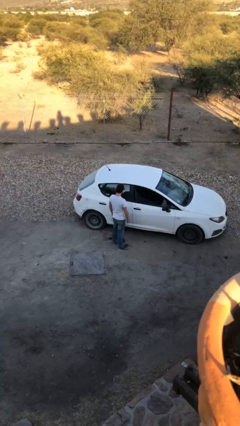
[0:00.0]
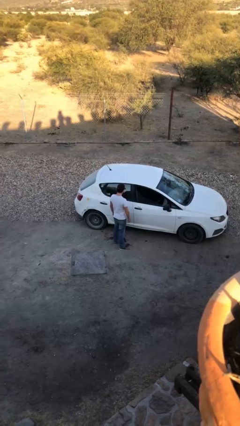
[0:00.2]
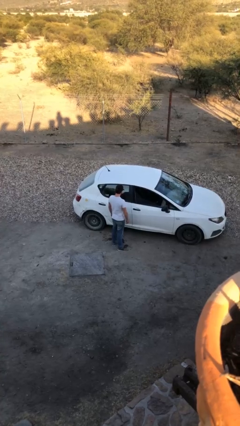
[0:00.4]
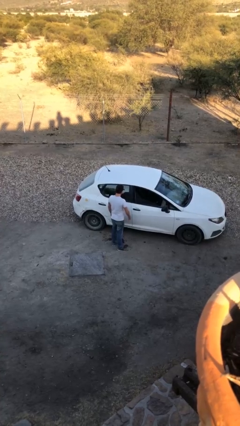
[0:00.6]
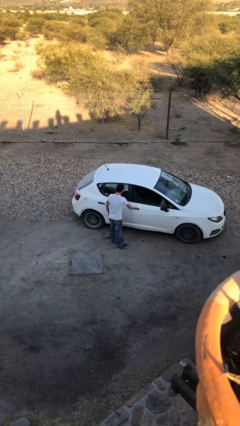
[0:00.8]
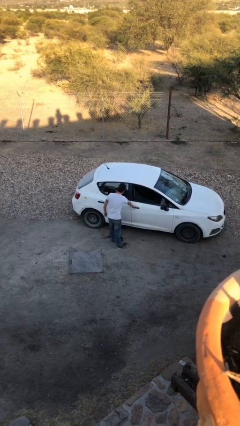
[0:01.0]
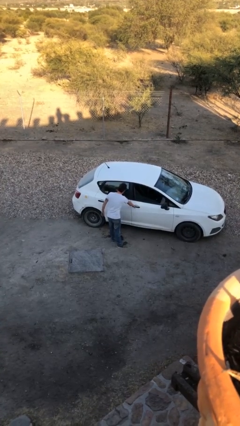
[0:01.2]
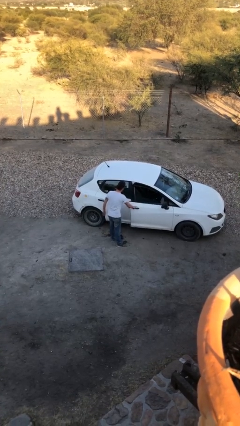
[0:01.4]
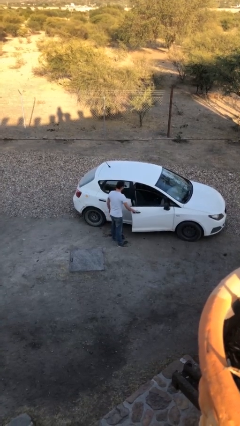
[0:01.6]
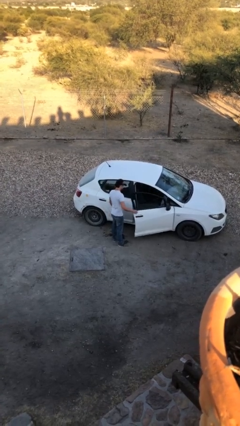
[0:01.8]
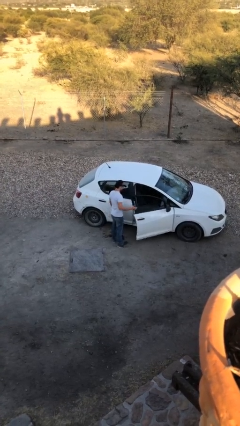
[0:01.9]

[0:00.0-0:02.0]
person opens car door

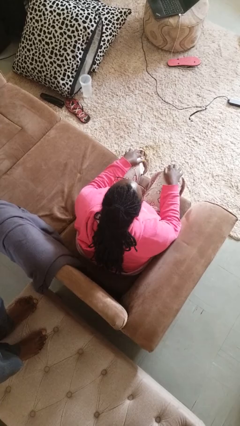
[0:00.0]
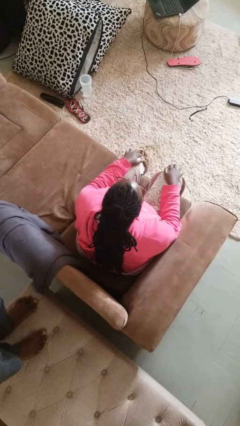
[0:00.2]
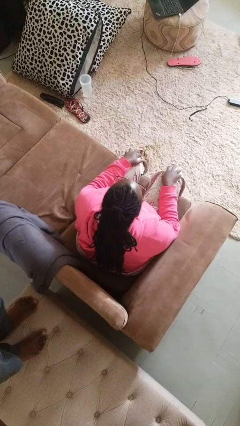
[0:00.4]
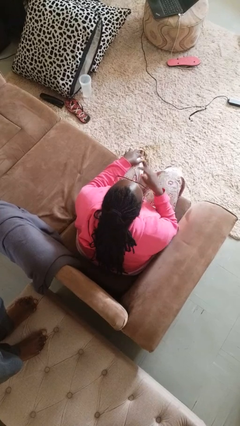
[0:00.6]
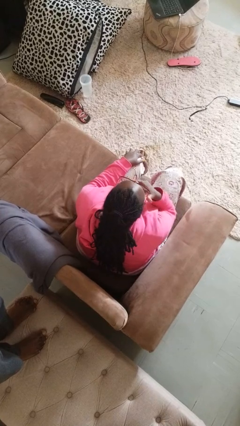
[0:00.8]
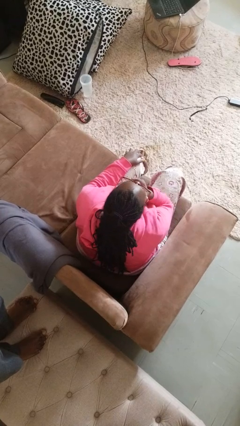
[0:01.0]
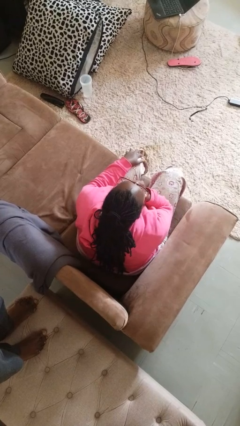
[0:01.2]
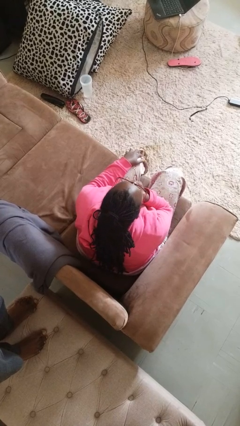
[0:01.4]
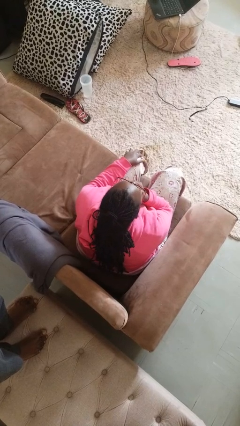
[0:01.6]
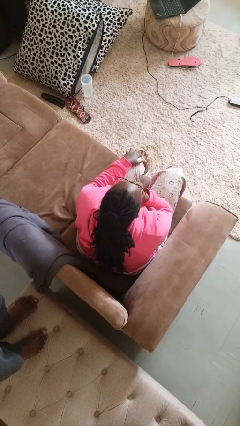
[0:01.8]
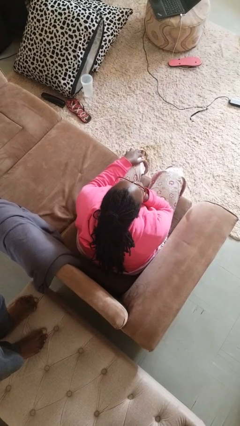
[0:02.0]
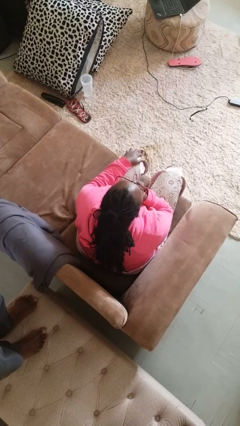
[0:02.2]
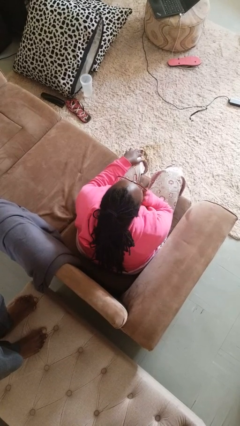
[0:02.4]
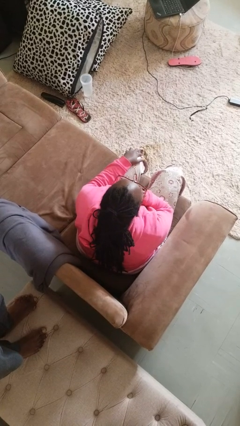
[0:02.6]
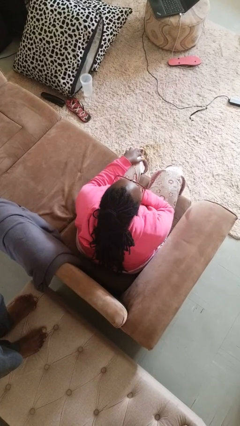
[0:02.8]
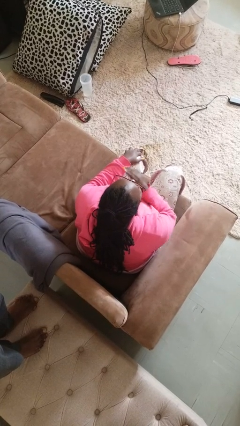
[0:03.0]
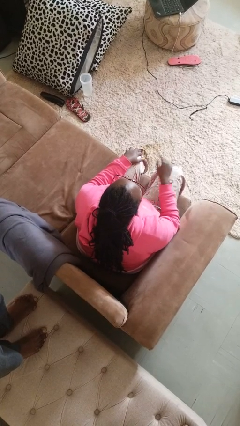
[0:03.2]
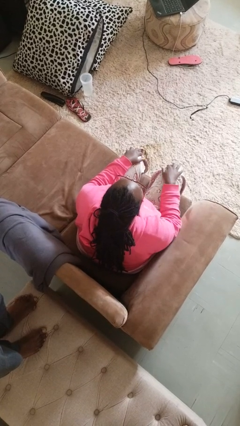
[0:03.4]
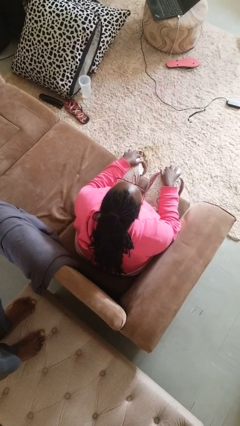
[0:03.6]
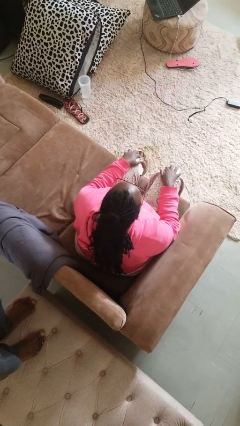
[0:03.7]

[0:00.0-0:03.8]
person strokes chin

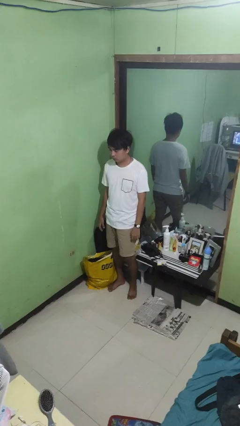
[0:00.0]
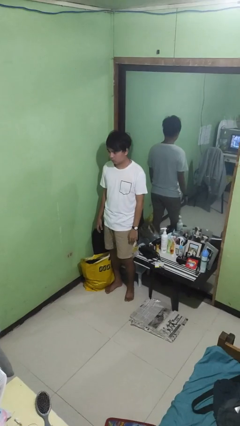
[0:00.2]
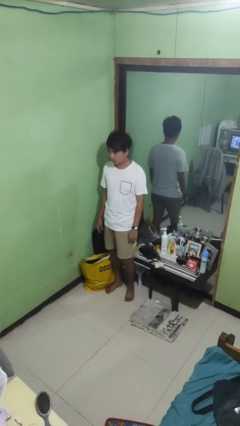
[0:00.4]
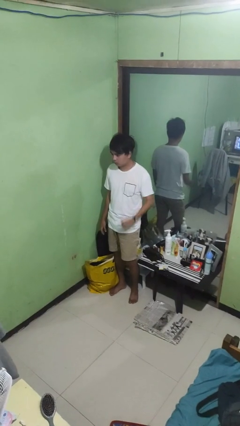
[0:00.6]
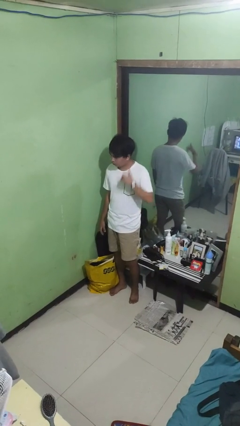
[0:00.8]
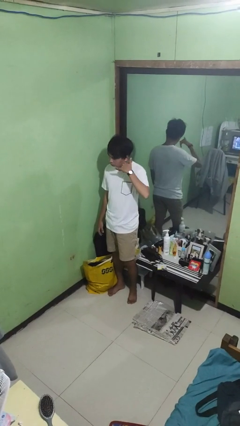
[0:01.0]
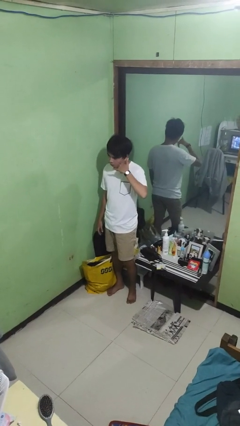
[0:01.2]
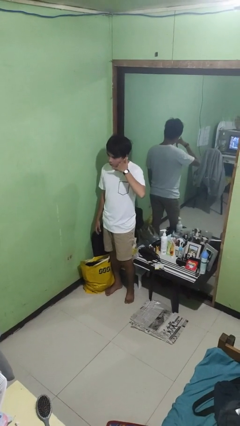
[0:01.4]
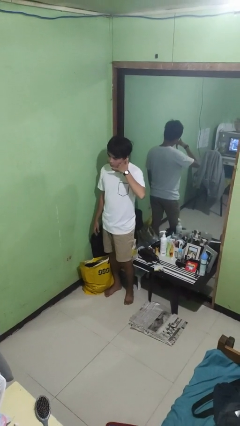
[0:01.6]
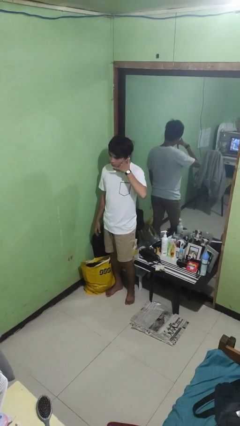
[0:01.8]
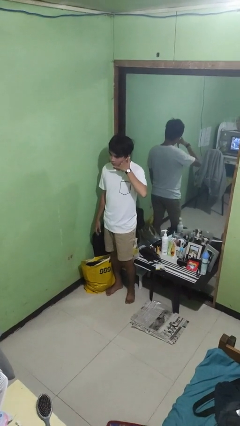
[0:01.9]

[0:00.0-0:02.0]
person gestures call me

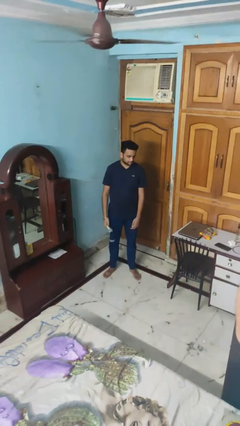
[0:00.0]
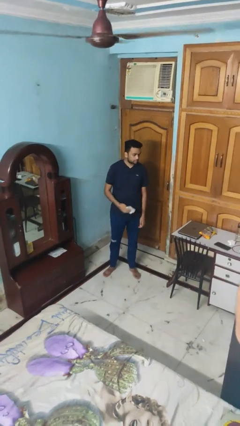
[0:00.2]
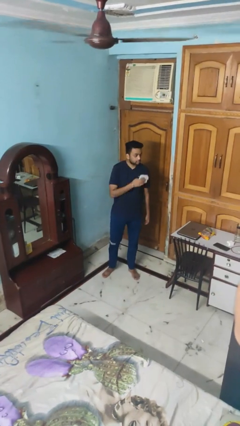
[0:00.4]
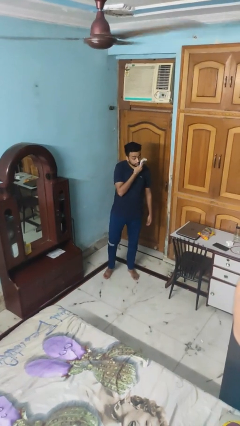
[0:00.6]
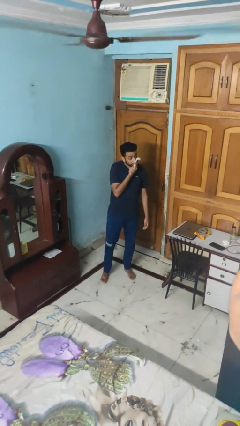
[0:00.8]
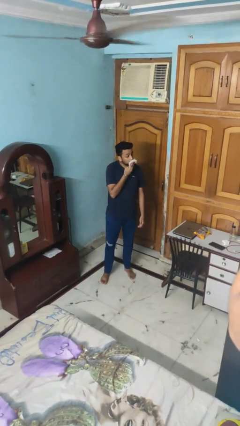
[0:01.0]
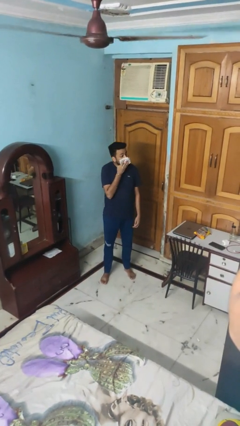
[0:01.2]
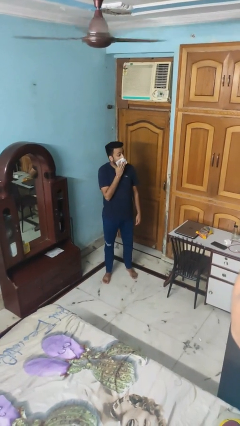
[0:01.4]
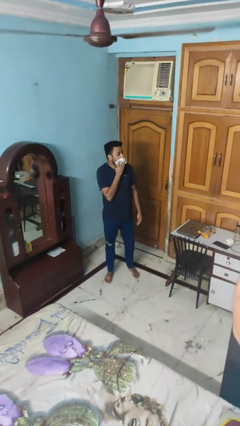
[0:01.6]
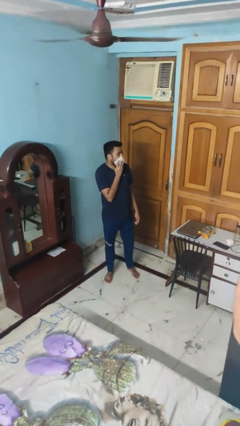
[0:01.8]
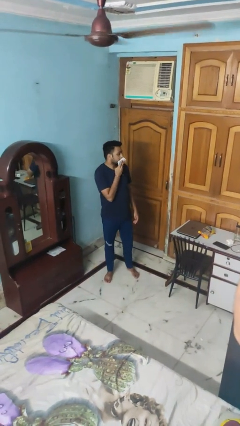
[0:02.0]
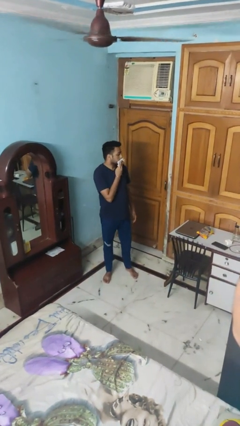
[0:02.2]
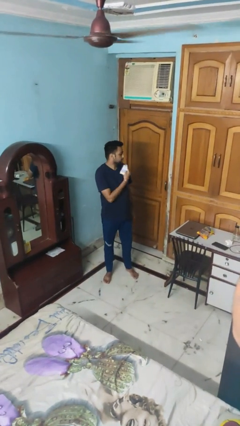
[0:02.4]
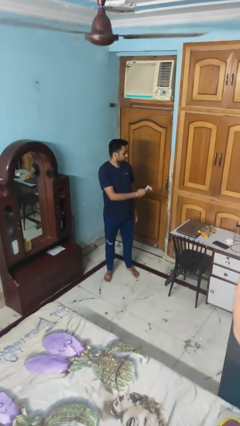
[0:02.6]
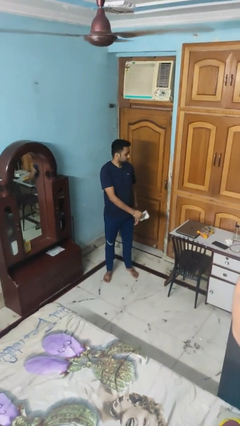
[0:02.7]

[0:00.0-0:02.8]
person wipes mouth with napkin

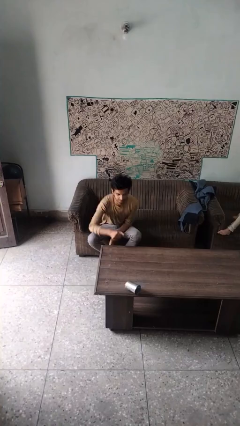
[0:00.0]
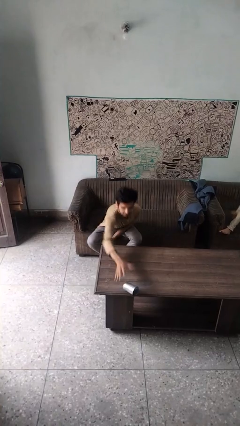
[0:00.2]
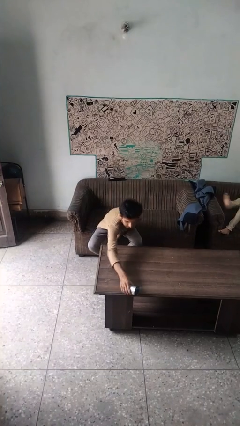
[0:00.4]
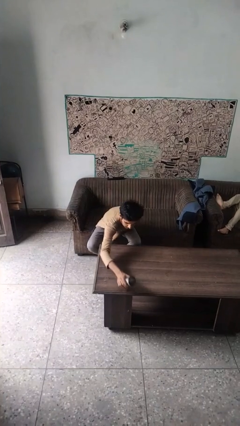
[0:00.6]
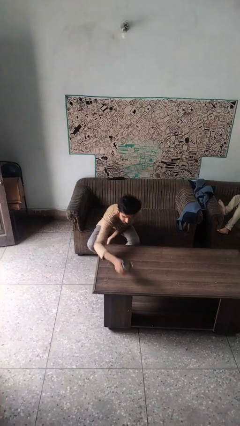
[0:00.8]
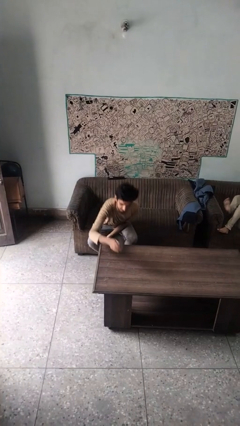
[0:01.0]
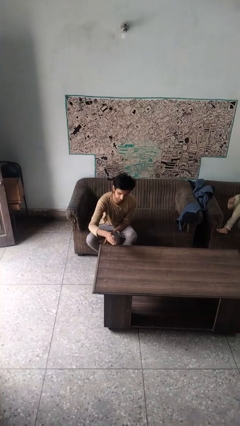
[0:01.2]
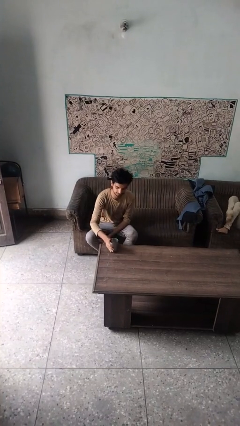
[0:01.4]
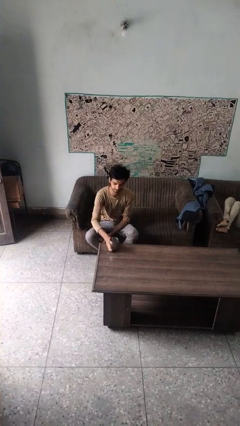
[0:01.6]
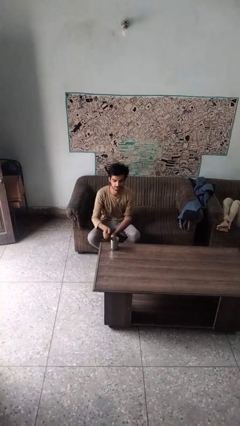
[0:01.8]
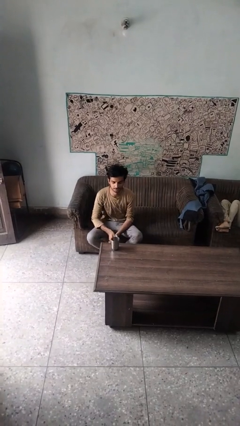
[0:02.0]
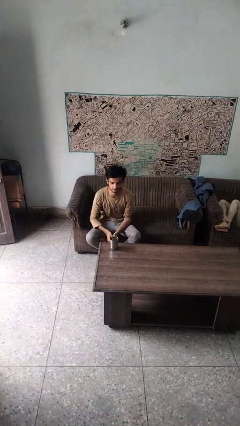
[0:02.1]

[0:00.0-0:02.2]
person sets upright glass

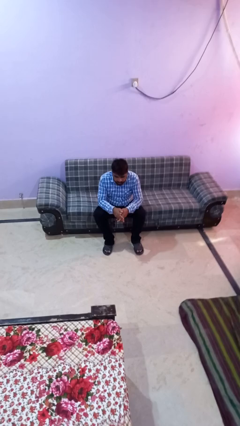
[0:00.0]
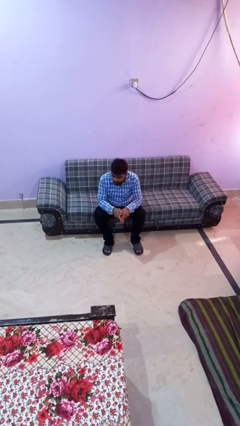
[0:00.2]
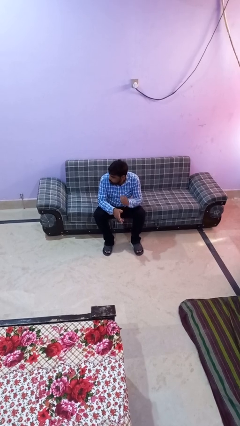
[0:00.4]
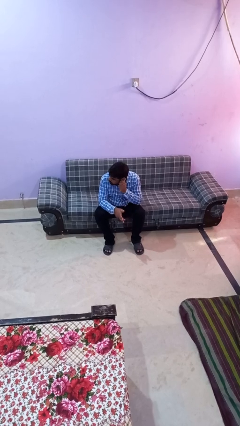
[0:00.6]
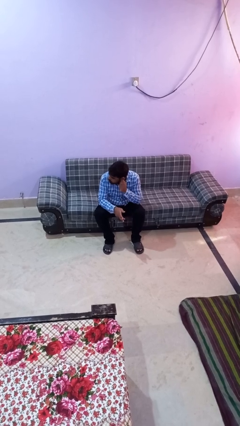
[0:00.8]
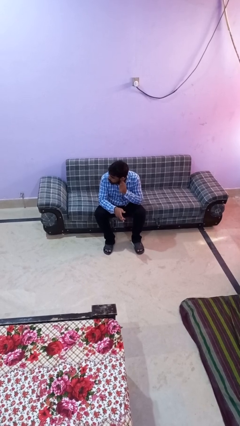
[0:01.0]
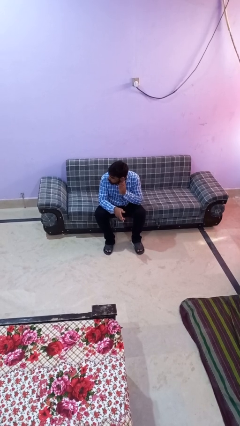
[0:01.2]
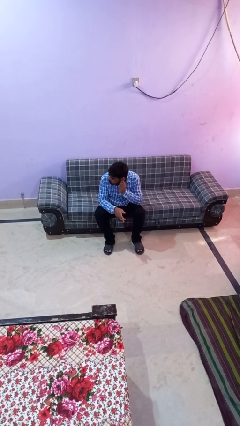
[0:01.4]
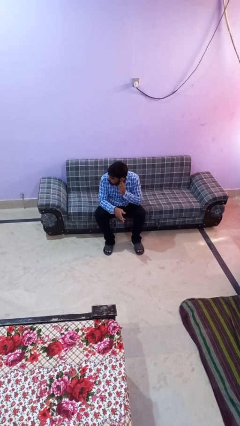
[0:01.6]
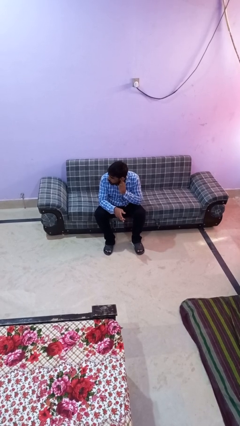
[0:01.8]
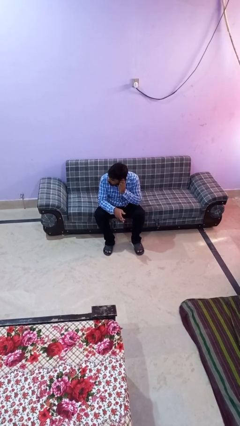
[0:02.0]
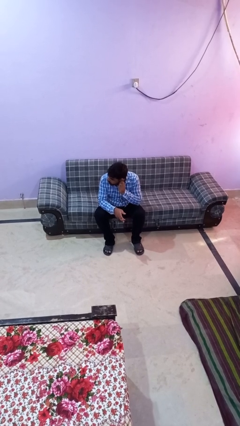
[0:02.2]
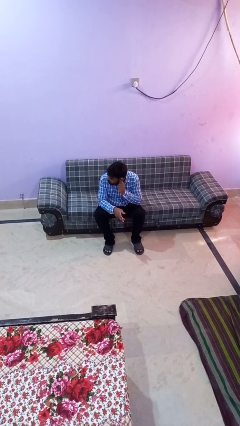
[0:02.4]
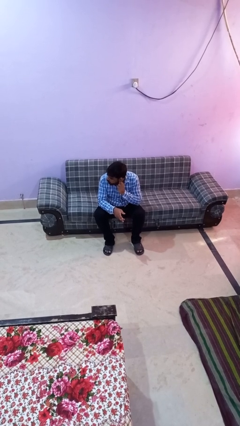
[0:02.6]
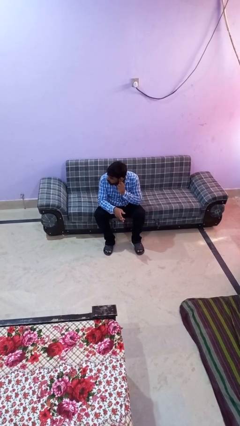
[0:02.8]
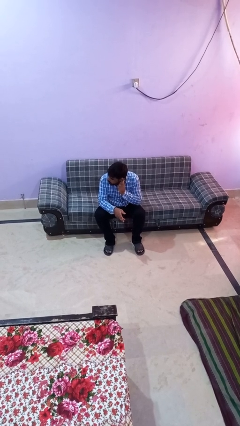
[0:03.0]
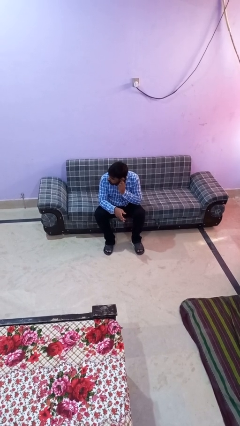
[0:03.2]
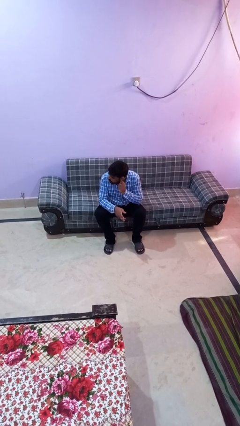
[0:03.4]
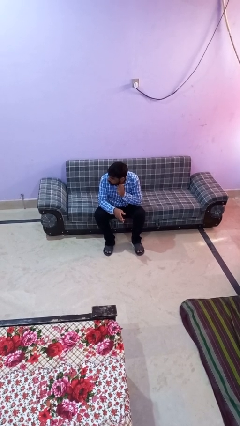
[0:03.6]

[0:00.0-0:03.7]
person touches earlobe

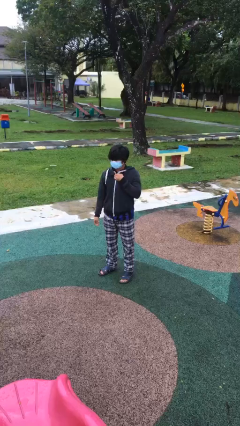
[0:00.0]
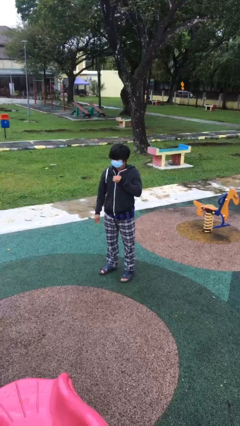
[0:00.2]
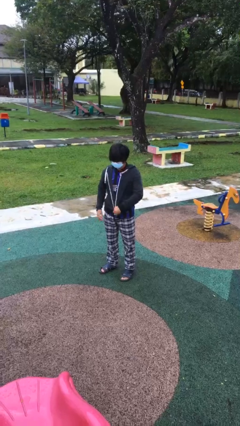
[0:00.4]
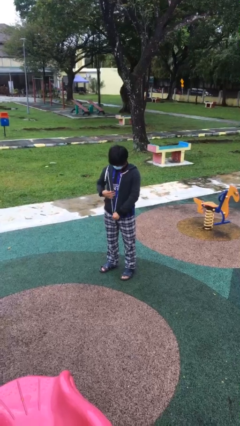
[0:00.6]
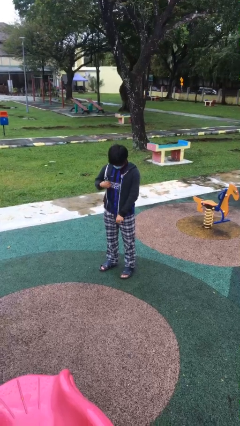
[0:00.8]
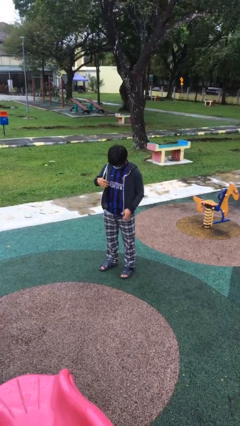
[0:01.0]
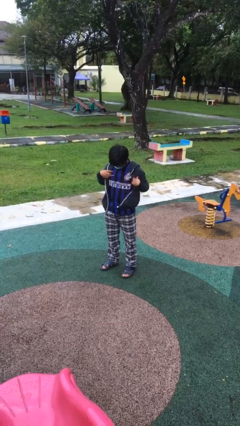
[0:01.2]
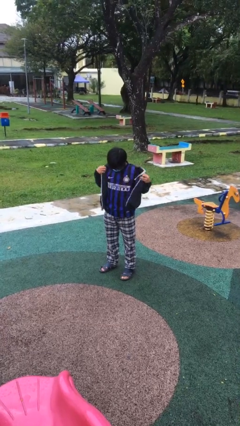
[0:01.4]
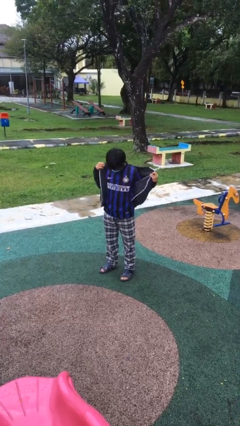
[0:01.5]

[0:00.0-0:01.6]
person unzips jacket
